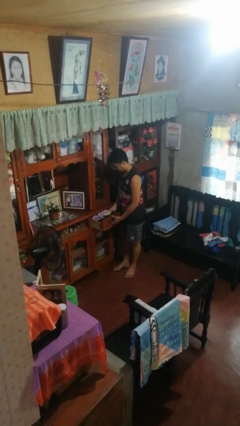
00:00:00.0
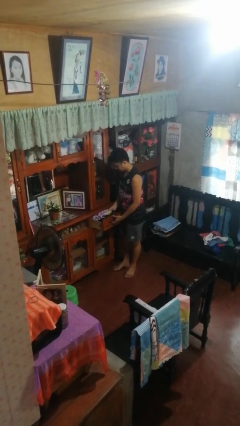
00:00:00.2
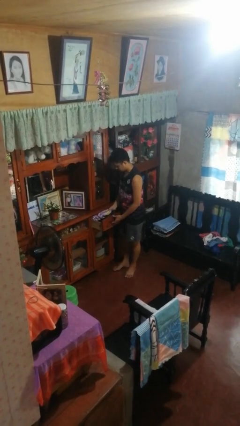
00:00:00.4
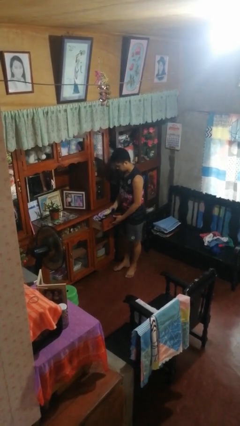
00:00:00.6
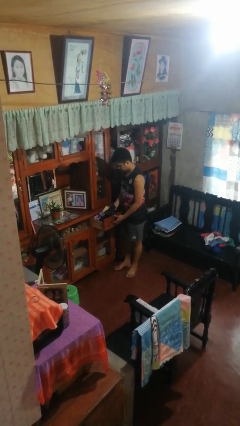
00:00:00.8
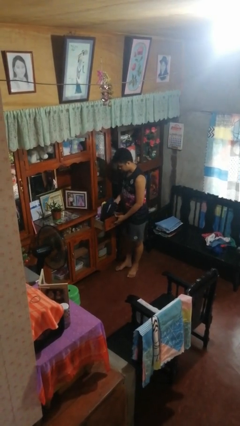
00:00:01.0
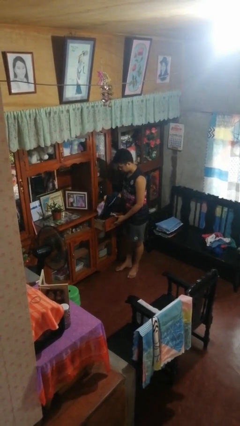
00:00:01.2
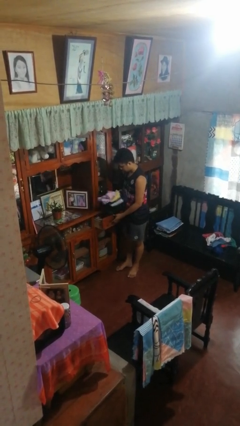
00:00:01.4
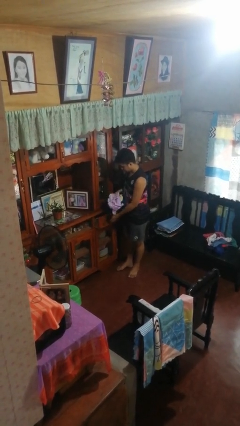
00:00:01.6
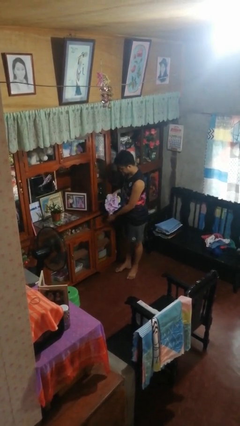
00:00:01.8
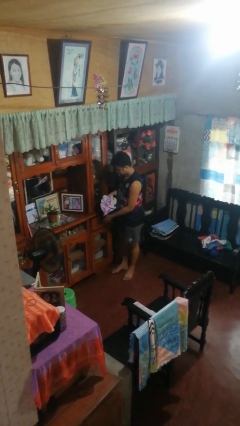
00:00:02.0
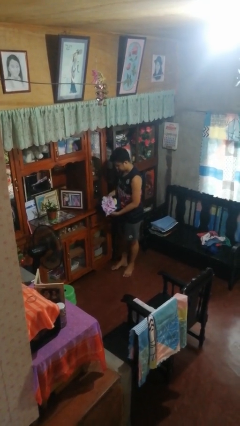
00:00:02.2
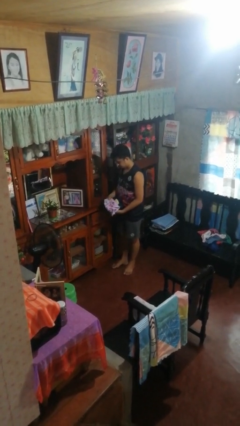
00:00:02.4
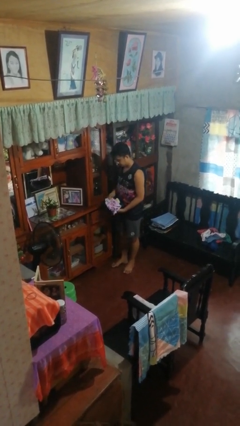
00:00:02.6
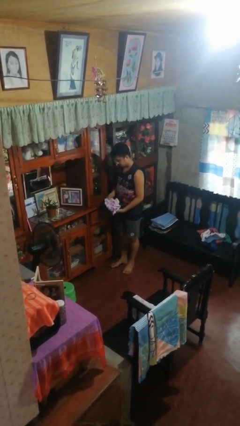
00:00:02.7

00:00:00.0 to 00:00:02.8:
person takes clothes from dresser

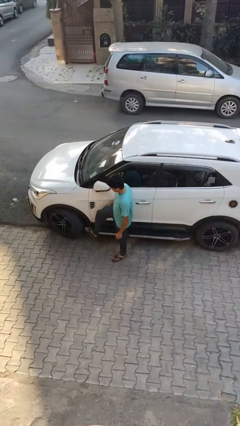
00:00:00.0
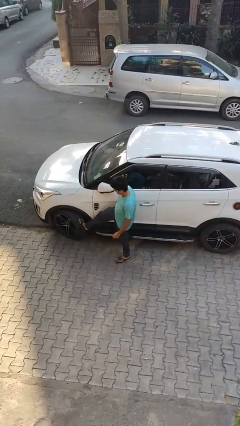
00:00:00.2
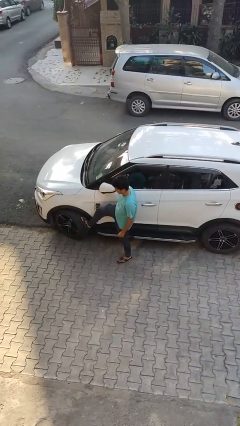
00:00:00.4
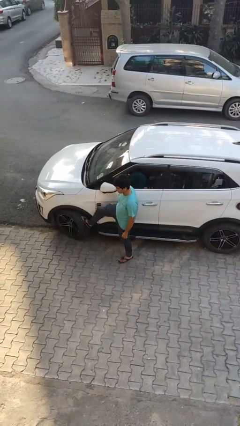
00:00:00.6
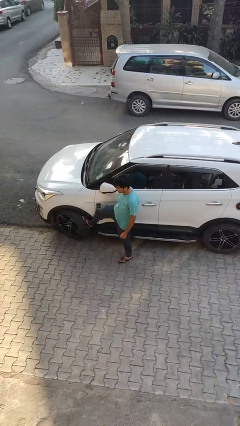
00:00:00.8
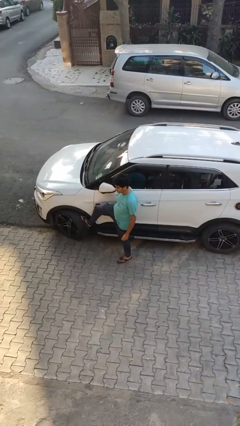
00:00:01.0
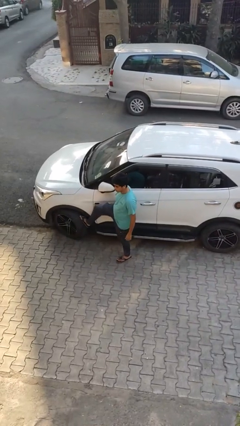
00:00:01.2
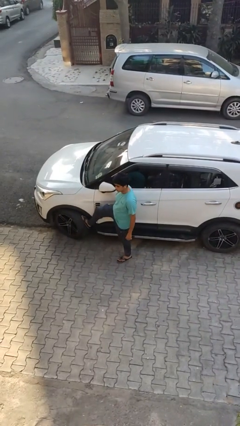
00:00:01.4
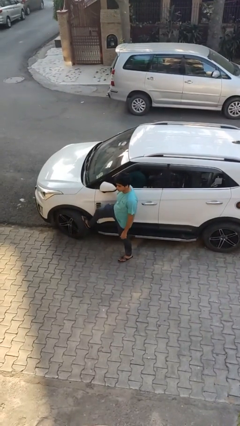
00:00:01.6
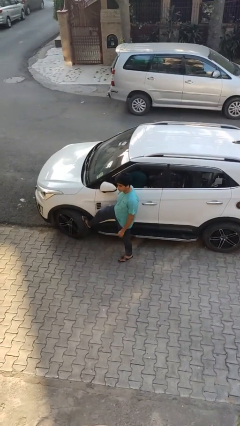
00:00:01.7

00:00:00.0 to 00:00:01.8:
person kicks car tires

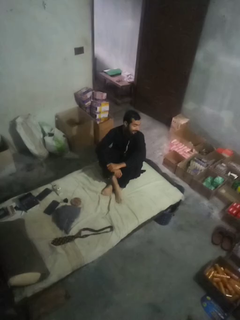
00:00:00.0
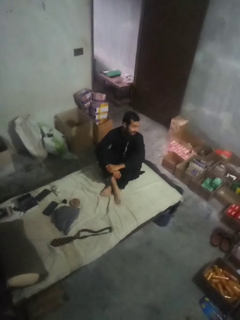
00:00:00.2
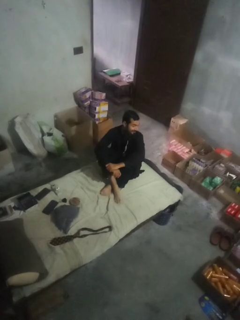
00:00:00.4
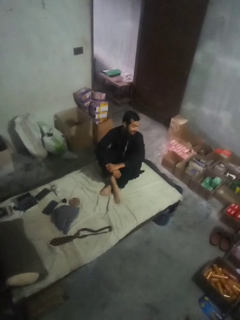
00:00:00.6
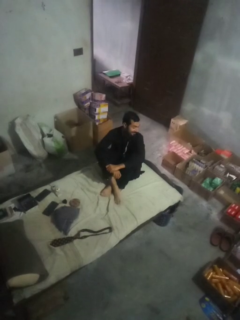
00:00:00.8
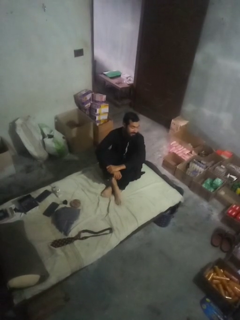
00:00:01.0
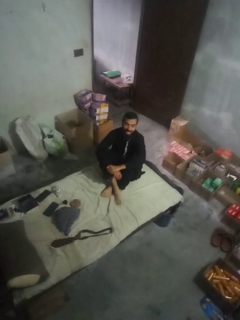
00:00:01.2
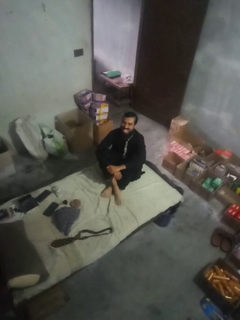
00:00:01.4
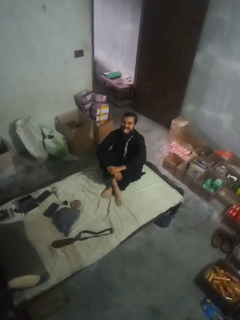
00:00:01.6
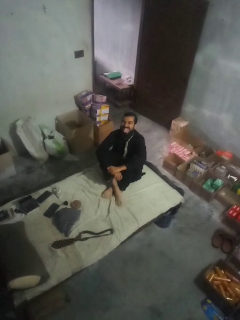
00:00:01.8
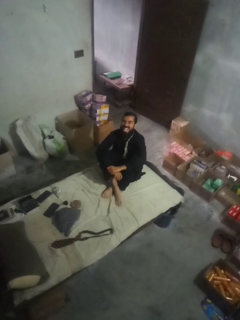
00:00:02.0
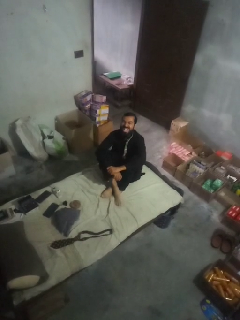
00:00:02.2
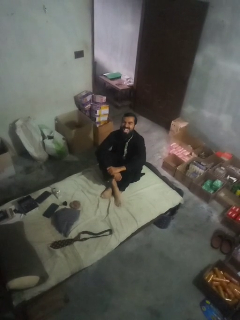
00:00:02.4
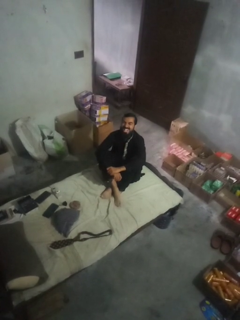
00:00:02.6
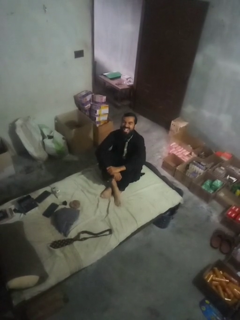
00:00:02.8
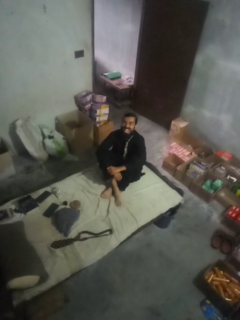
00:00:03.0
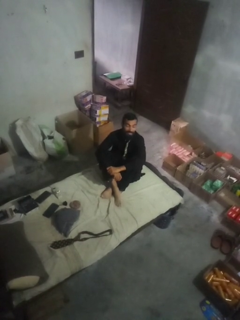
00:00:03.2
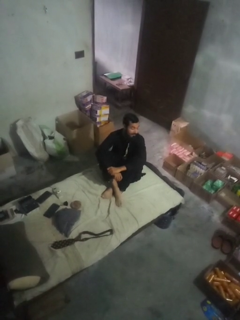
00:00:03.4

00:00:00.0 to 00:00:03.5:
person sticks out tongue

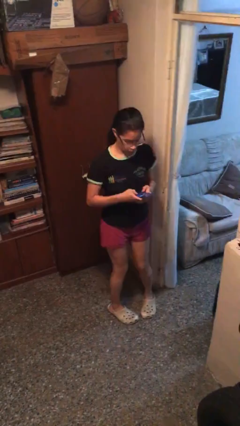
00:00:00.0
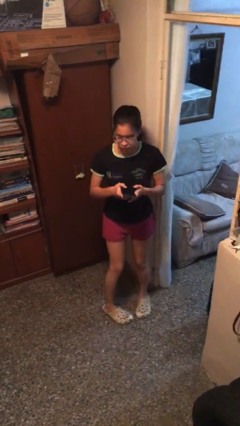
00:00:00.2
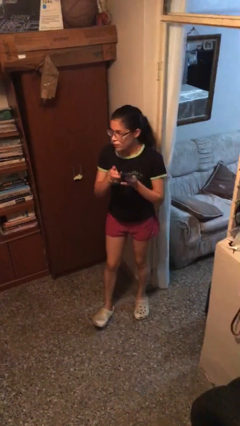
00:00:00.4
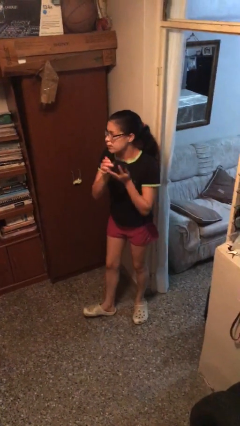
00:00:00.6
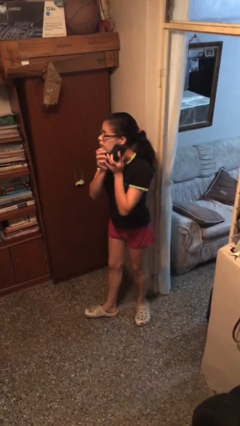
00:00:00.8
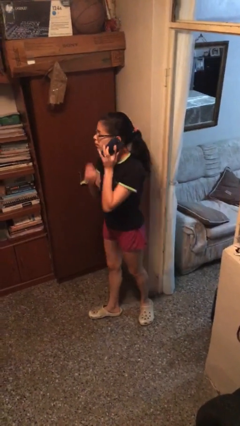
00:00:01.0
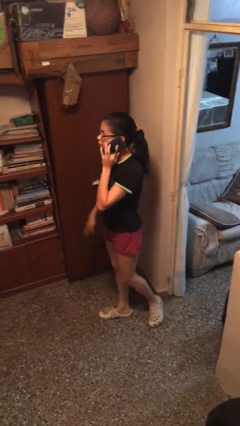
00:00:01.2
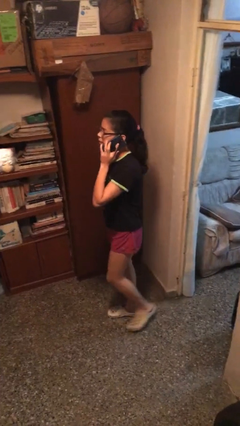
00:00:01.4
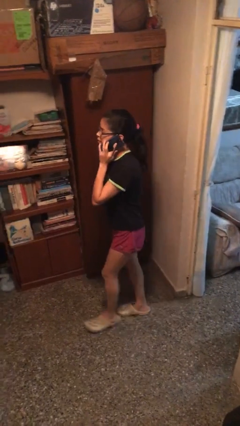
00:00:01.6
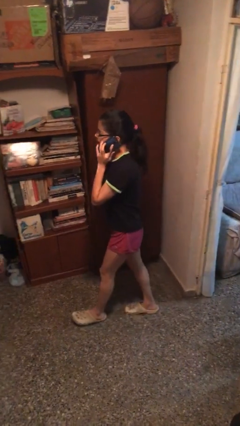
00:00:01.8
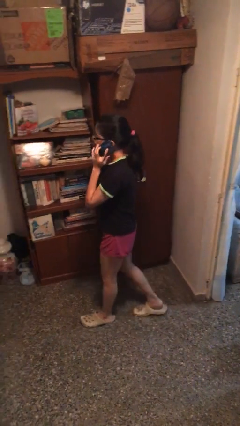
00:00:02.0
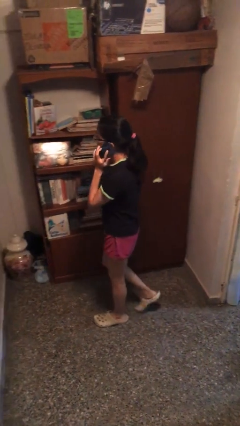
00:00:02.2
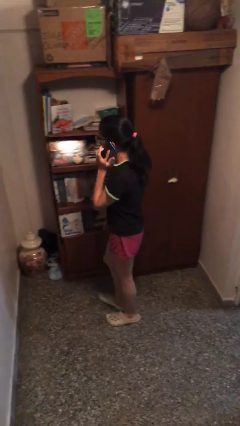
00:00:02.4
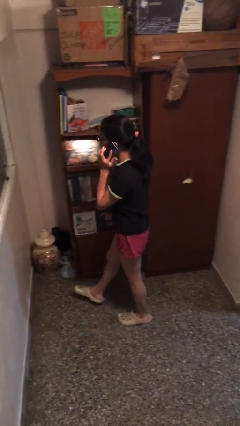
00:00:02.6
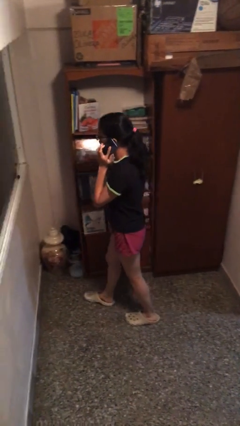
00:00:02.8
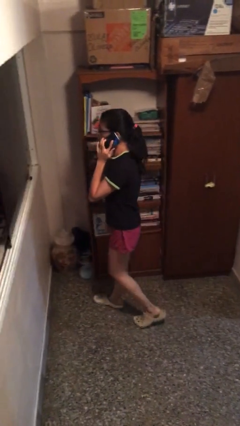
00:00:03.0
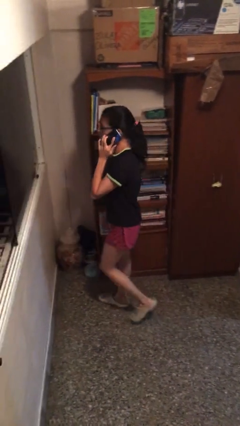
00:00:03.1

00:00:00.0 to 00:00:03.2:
person talks on phone

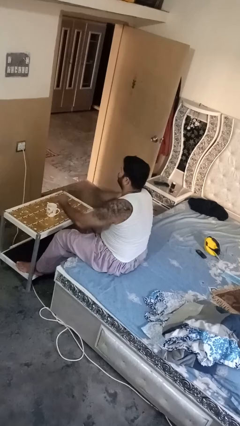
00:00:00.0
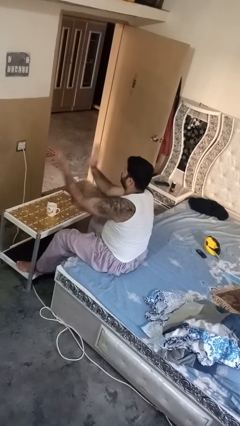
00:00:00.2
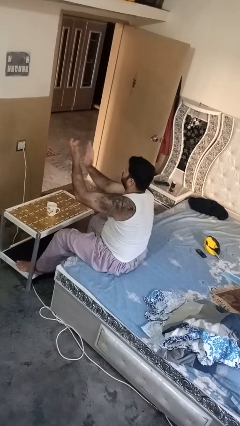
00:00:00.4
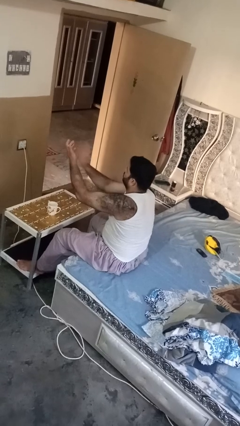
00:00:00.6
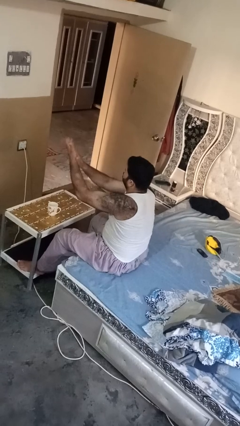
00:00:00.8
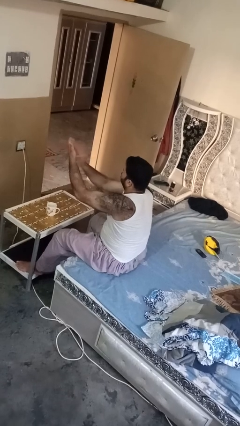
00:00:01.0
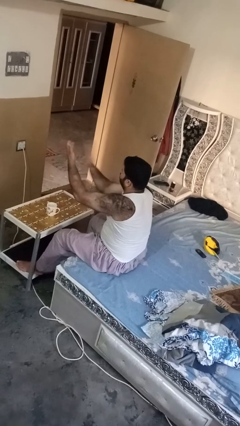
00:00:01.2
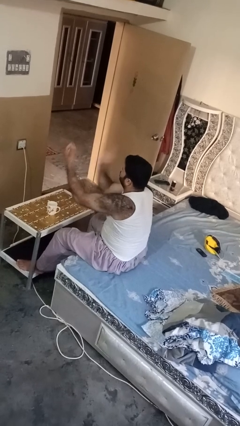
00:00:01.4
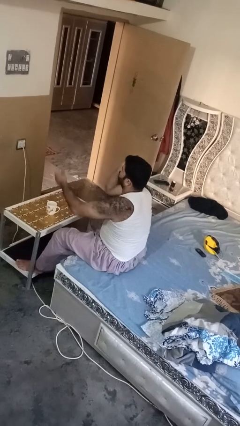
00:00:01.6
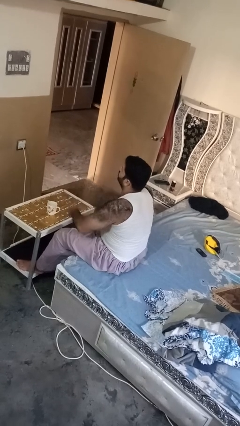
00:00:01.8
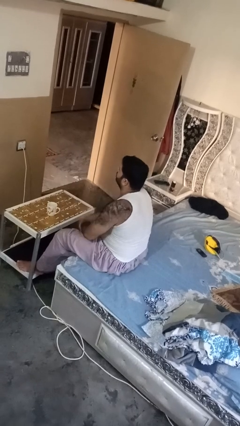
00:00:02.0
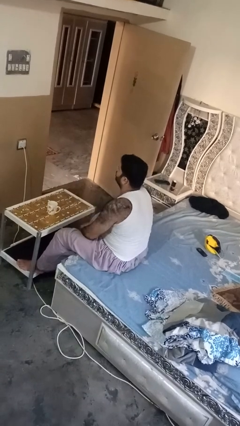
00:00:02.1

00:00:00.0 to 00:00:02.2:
person claps hands

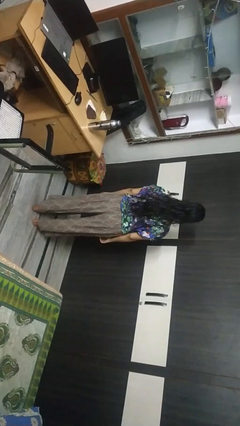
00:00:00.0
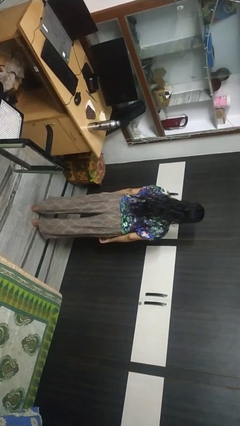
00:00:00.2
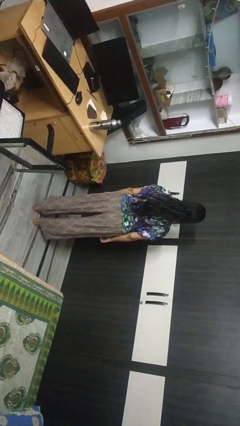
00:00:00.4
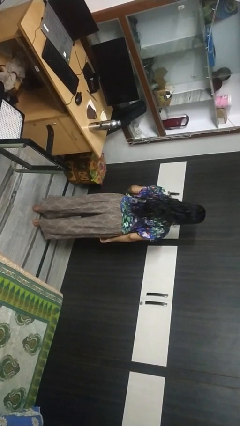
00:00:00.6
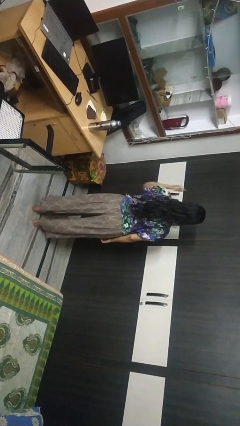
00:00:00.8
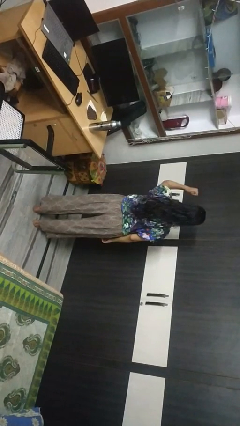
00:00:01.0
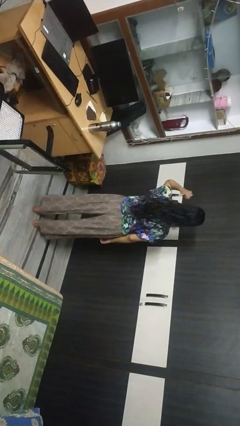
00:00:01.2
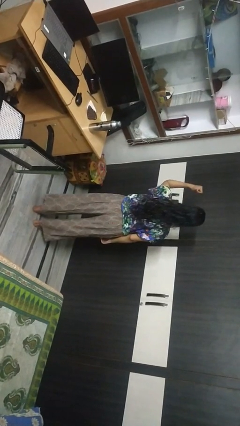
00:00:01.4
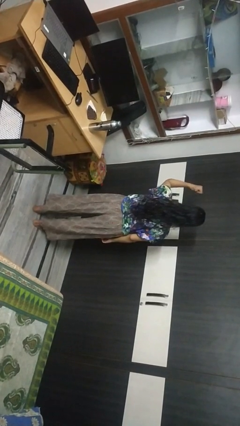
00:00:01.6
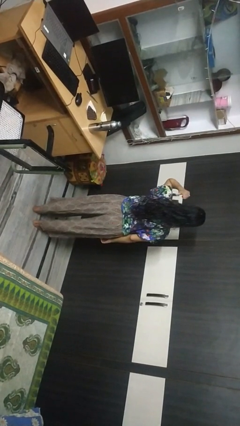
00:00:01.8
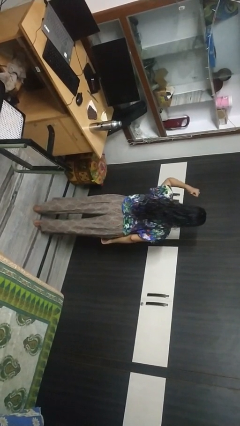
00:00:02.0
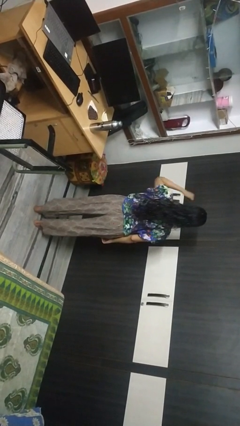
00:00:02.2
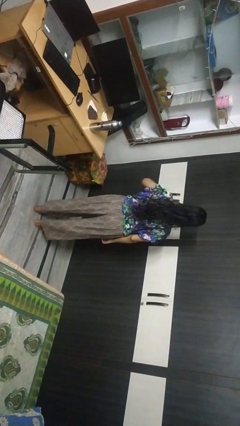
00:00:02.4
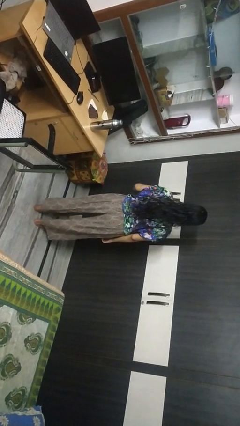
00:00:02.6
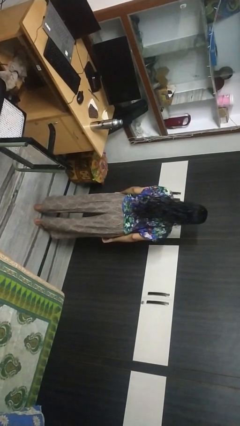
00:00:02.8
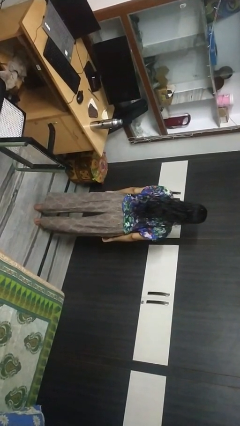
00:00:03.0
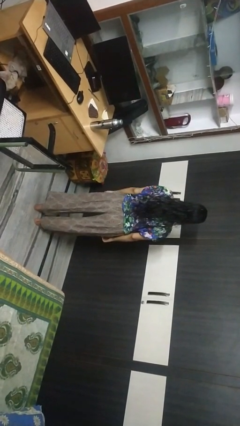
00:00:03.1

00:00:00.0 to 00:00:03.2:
person gestures behind me

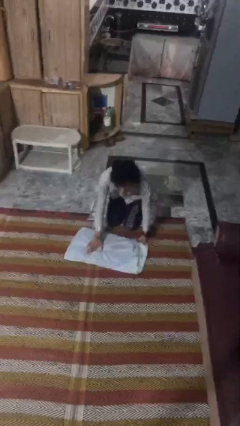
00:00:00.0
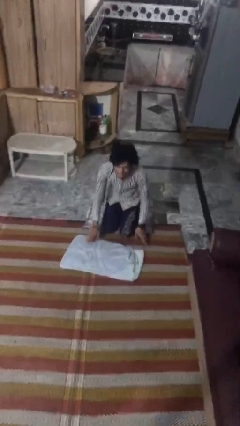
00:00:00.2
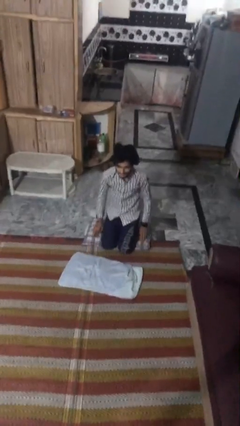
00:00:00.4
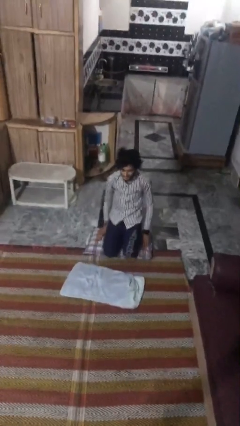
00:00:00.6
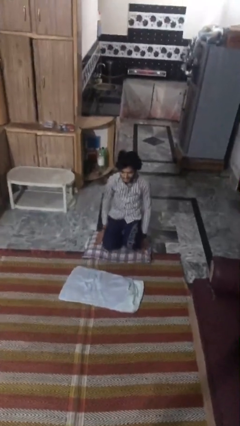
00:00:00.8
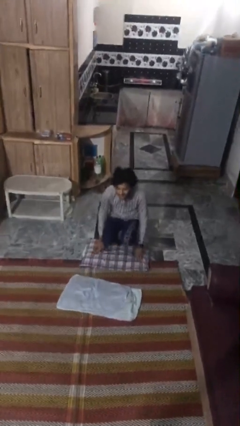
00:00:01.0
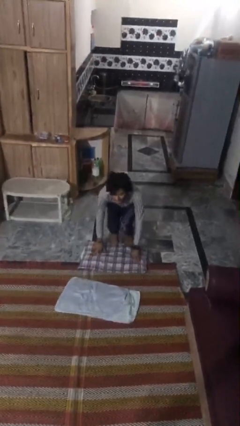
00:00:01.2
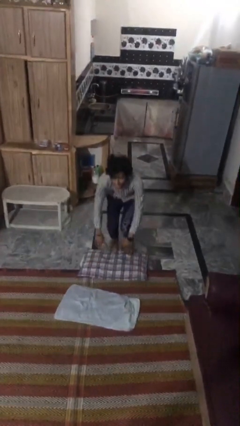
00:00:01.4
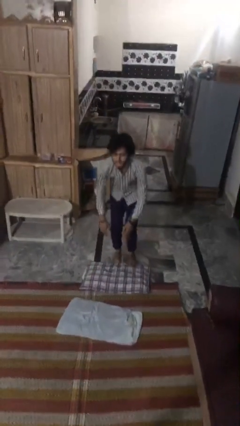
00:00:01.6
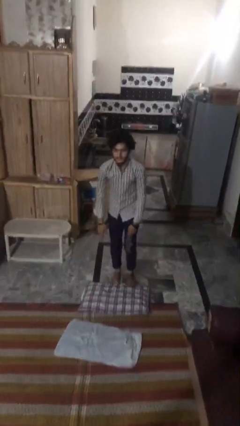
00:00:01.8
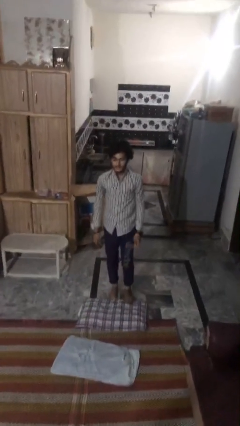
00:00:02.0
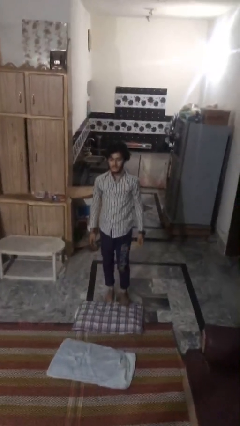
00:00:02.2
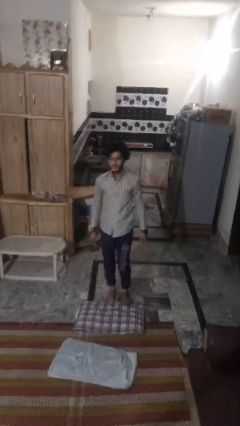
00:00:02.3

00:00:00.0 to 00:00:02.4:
person stands up from floor
